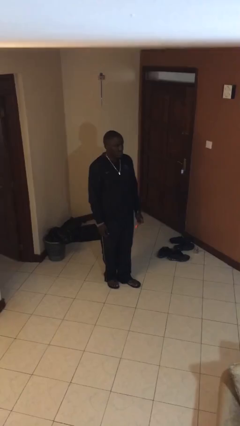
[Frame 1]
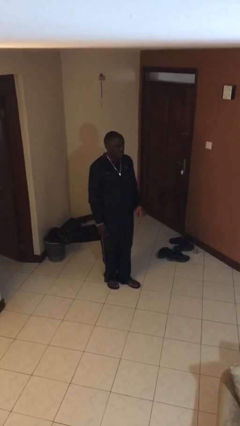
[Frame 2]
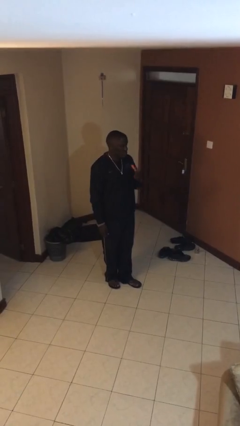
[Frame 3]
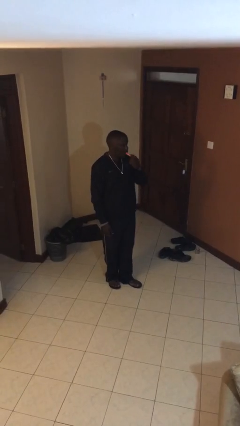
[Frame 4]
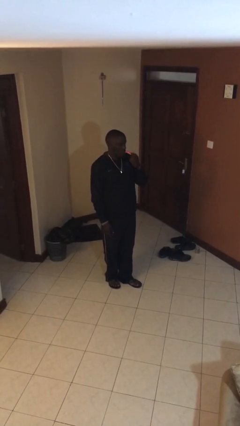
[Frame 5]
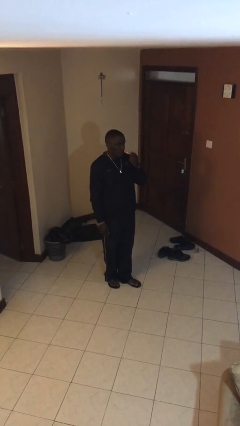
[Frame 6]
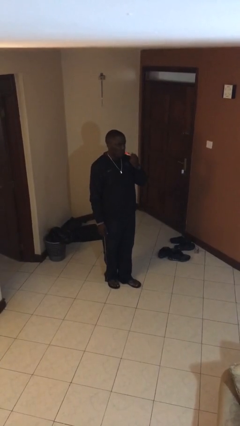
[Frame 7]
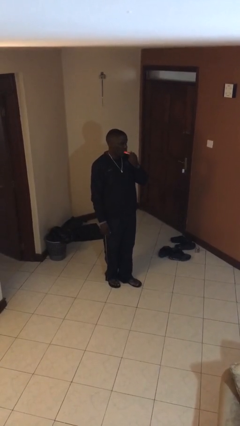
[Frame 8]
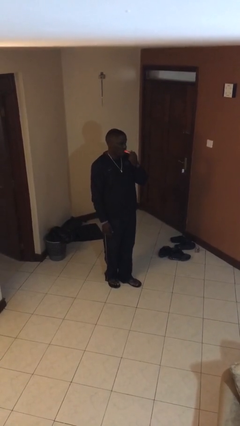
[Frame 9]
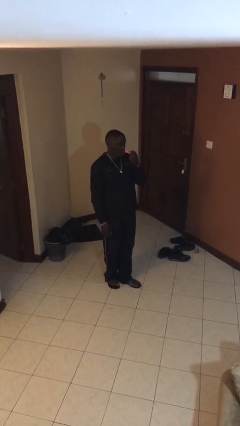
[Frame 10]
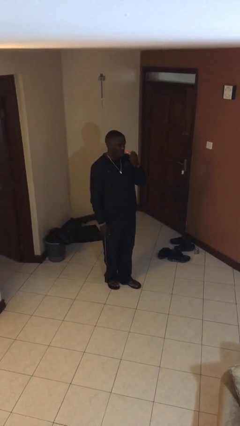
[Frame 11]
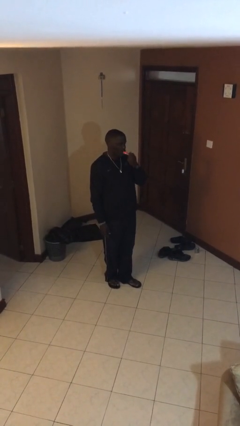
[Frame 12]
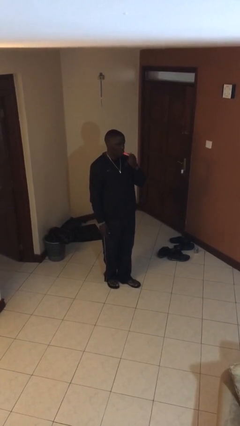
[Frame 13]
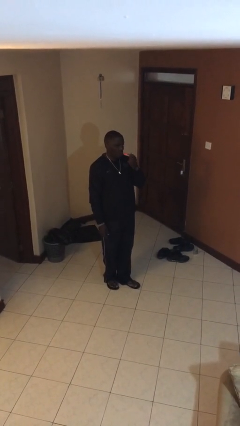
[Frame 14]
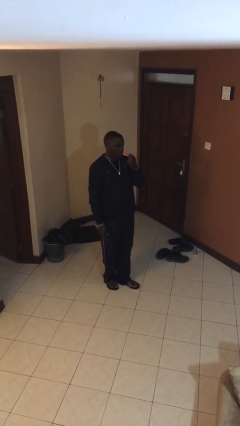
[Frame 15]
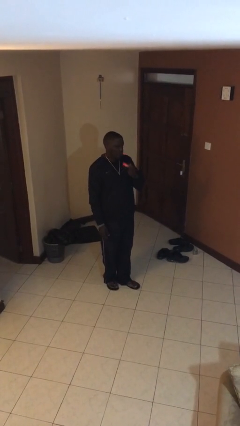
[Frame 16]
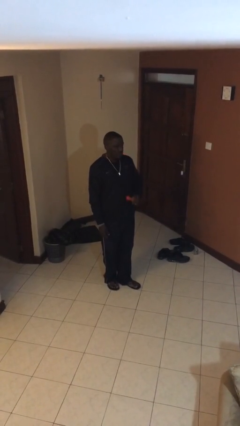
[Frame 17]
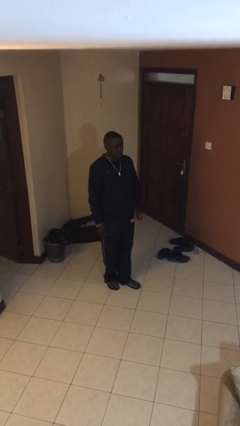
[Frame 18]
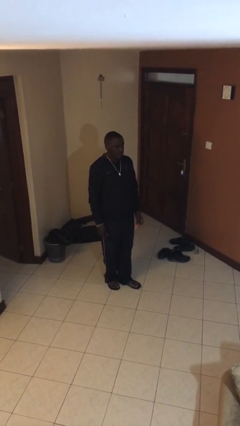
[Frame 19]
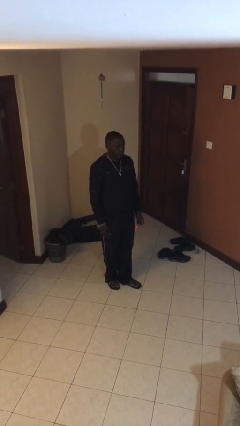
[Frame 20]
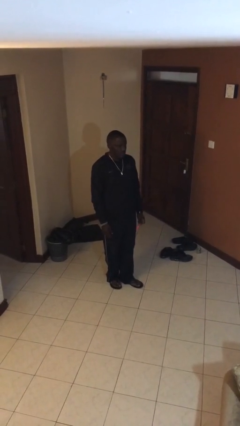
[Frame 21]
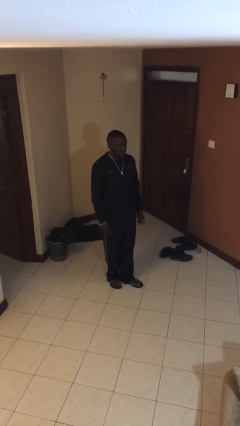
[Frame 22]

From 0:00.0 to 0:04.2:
person applies lip makeup

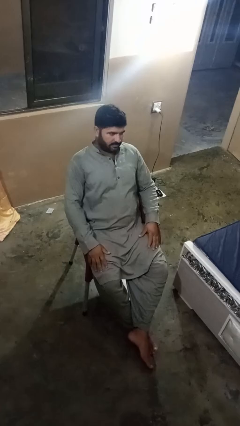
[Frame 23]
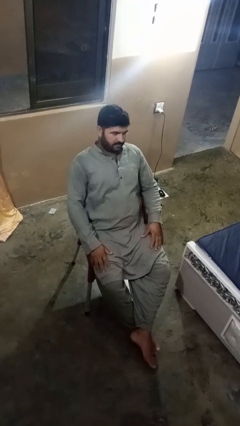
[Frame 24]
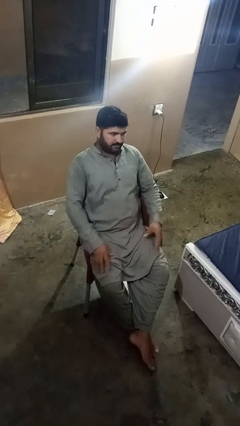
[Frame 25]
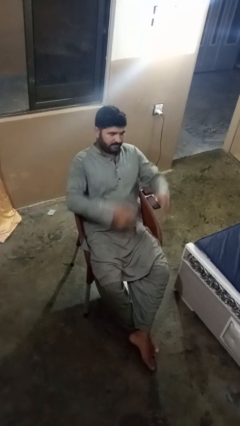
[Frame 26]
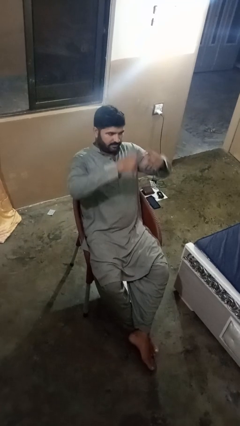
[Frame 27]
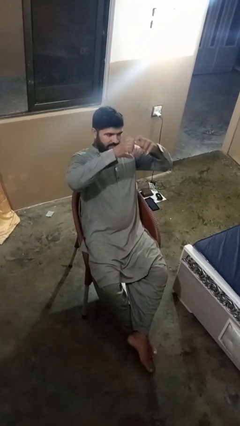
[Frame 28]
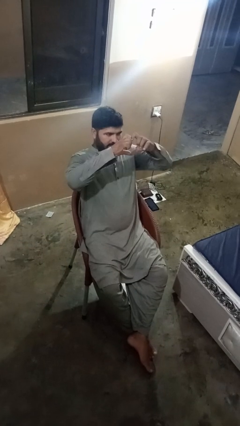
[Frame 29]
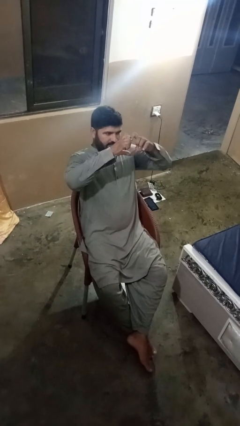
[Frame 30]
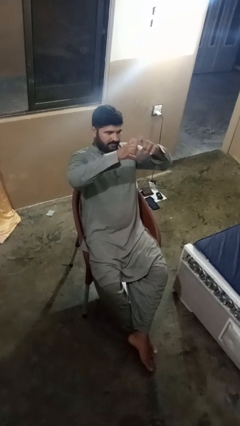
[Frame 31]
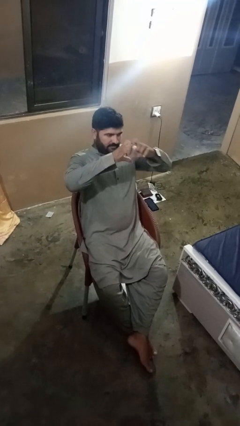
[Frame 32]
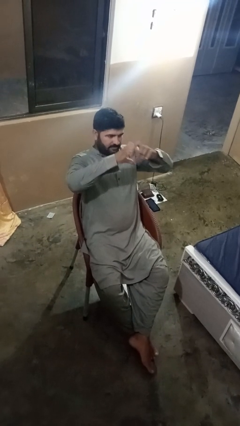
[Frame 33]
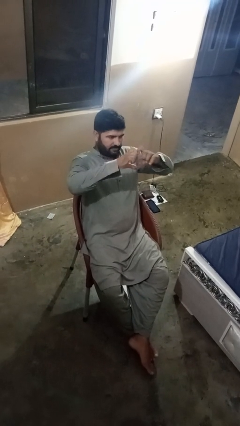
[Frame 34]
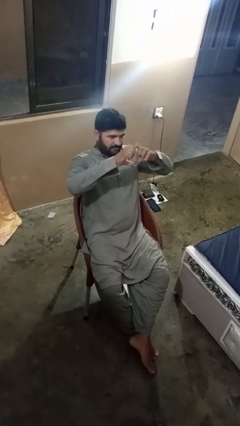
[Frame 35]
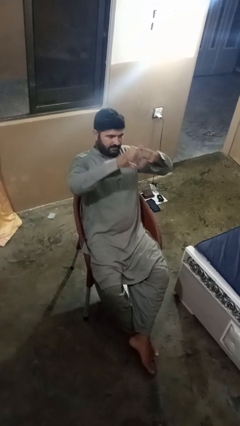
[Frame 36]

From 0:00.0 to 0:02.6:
person gestures heart

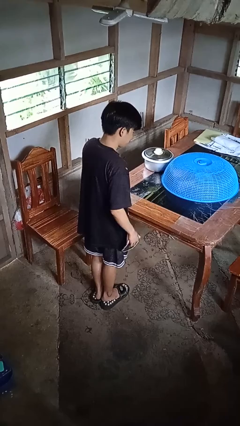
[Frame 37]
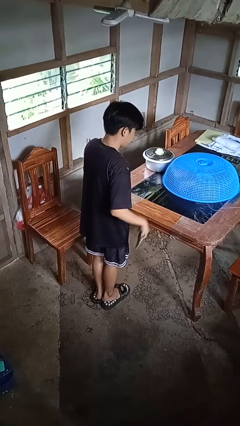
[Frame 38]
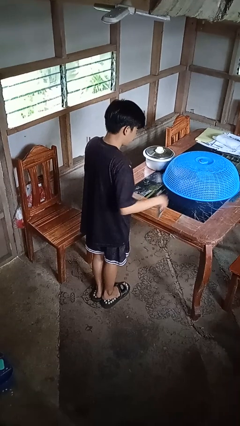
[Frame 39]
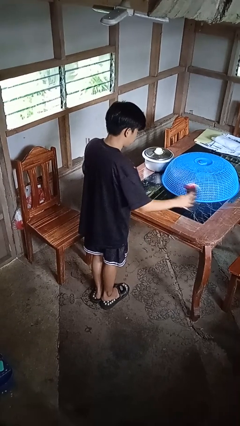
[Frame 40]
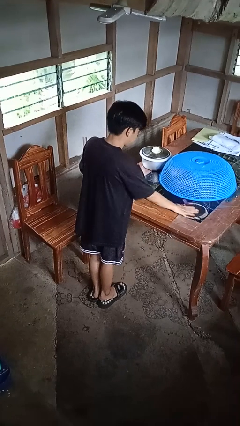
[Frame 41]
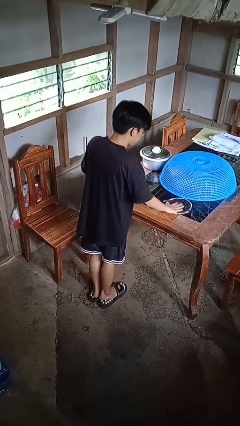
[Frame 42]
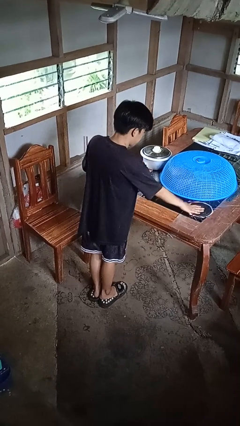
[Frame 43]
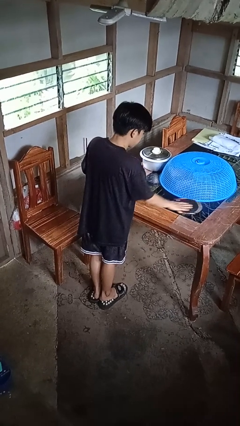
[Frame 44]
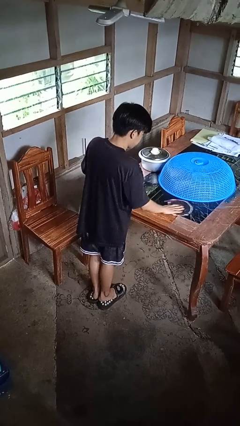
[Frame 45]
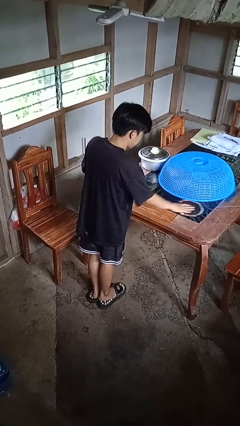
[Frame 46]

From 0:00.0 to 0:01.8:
person cleans table with rag

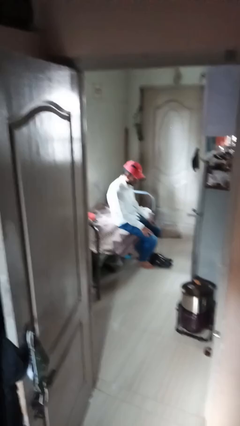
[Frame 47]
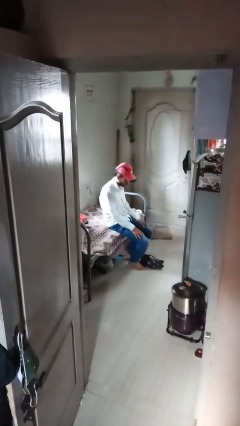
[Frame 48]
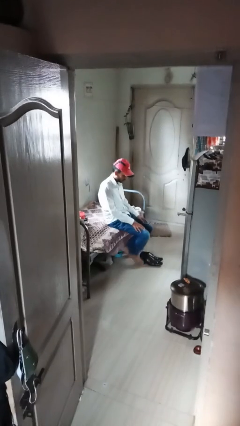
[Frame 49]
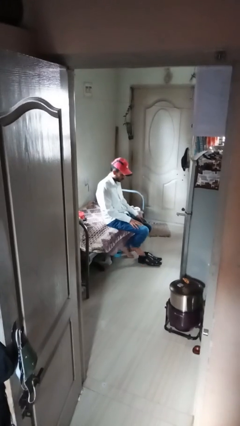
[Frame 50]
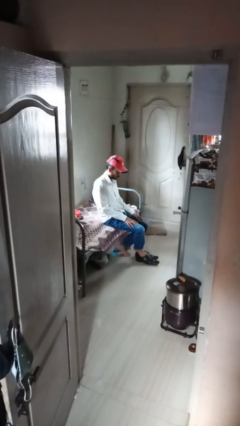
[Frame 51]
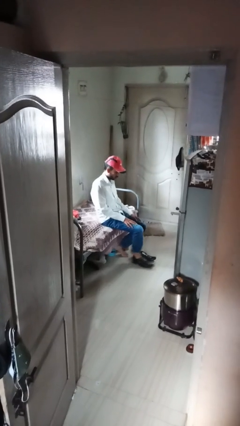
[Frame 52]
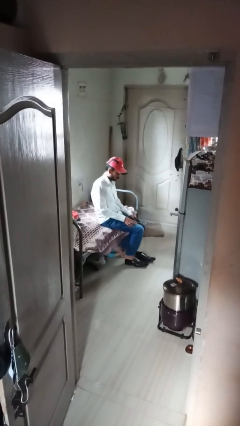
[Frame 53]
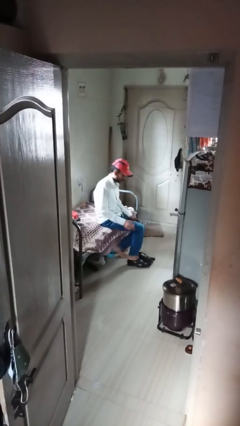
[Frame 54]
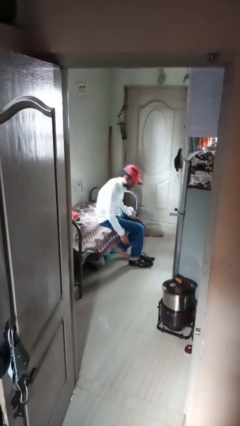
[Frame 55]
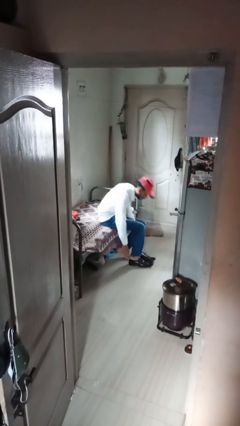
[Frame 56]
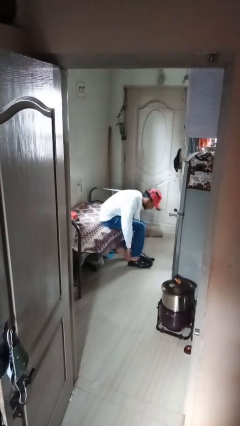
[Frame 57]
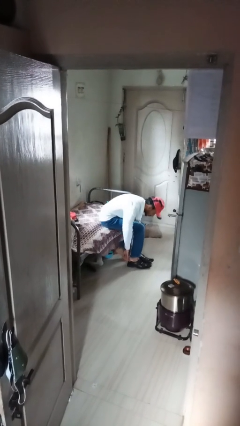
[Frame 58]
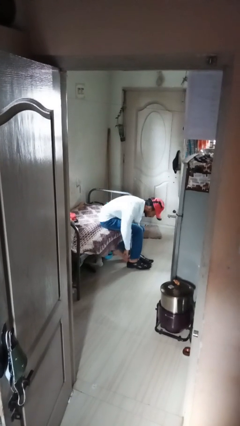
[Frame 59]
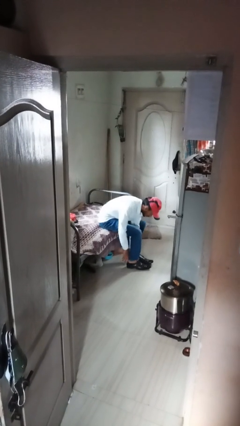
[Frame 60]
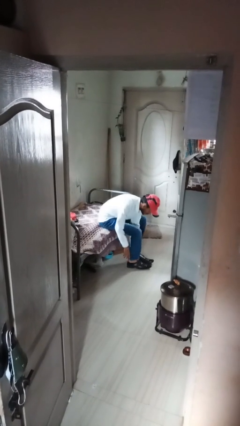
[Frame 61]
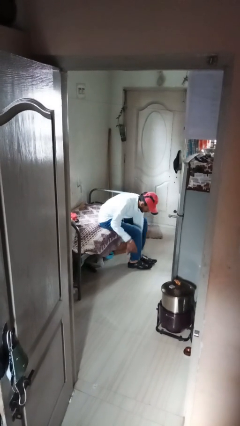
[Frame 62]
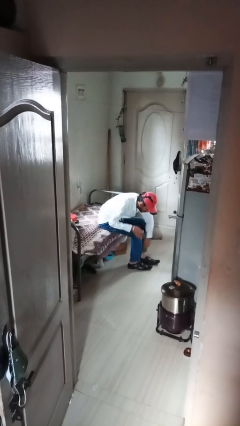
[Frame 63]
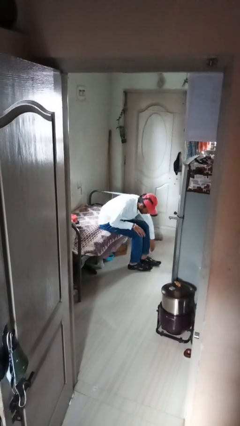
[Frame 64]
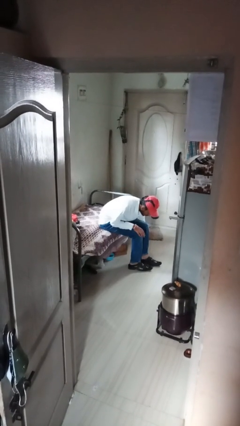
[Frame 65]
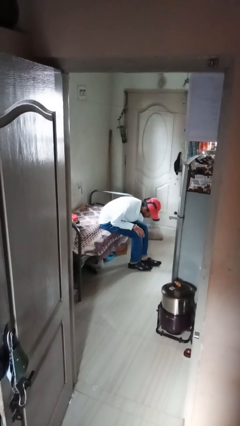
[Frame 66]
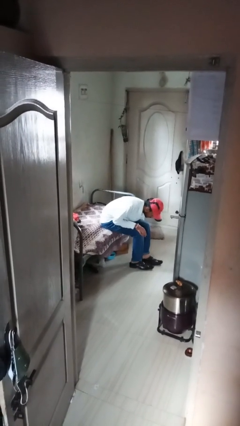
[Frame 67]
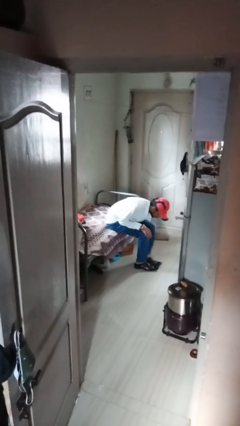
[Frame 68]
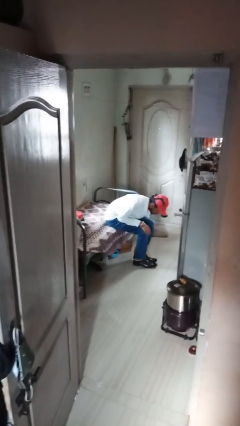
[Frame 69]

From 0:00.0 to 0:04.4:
person puts on shoes

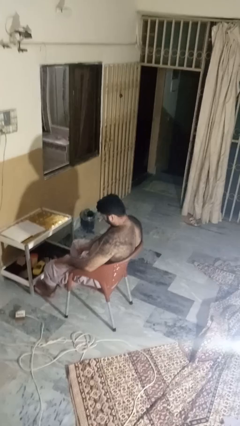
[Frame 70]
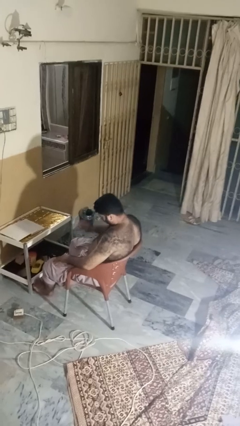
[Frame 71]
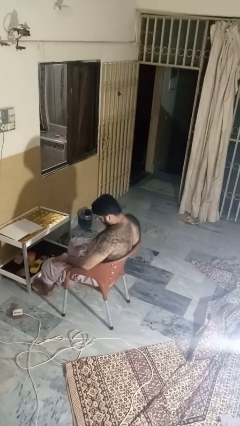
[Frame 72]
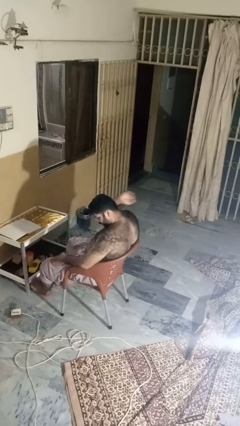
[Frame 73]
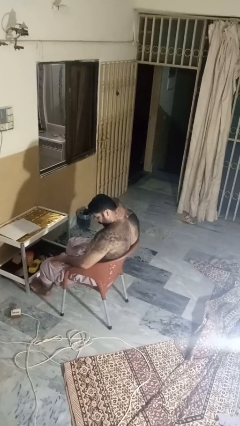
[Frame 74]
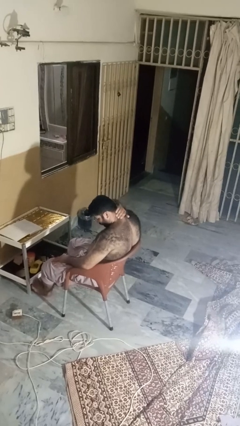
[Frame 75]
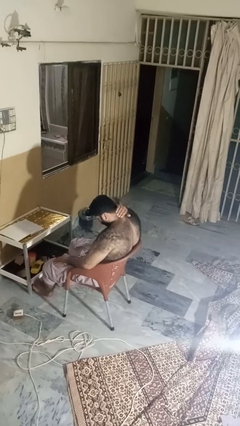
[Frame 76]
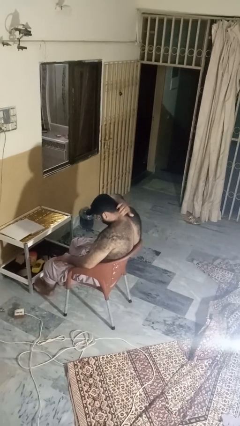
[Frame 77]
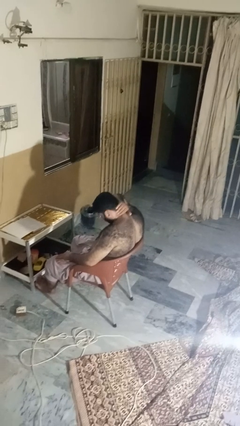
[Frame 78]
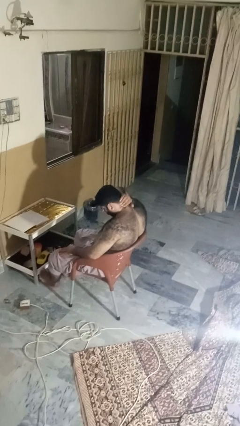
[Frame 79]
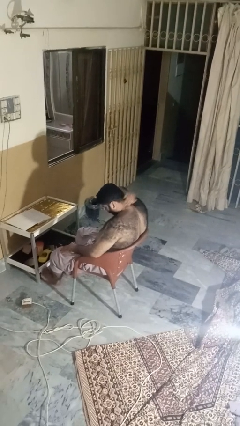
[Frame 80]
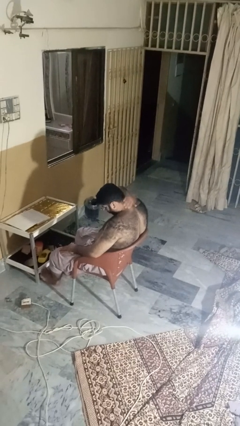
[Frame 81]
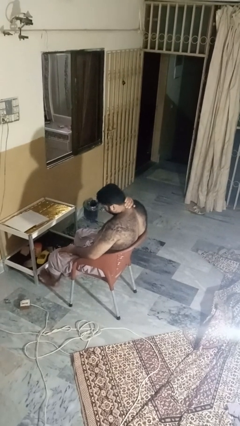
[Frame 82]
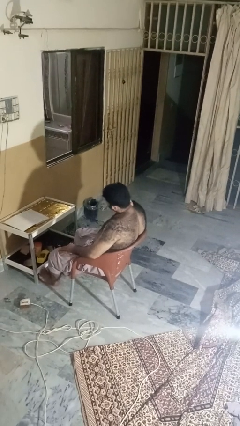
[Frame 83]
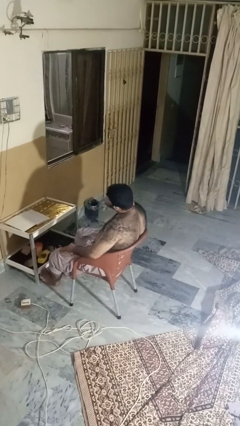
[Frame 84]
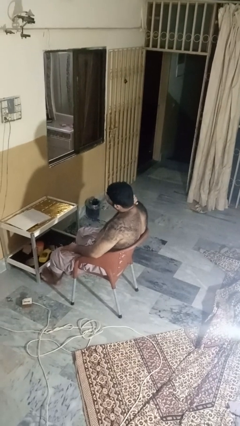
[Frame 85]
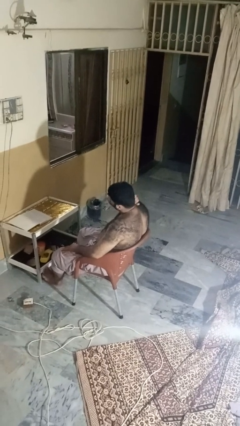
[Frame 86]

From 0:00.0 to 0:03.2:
person rubs neck

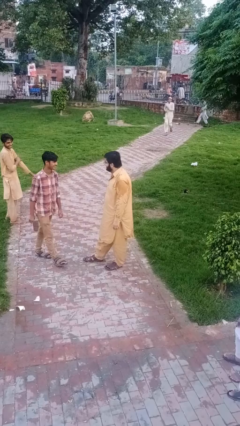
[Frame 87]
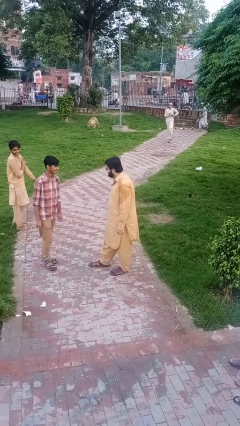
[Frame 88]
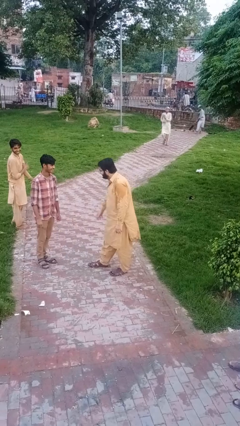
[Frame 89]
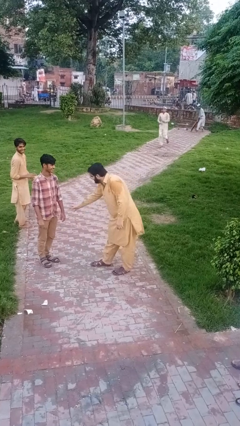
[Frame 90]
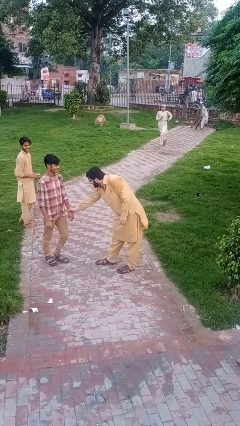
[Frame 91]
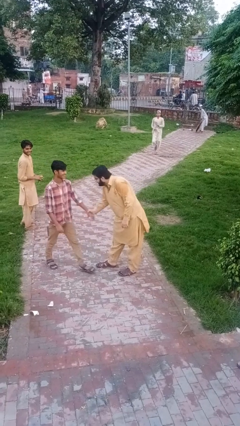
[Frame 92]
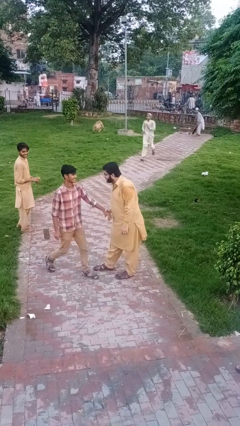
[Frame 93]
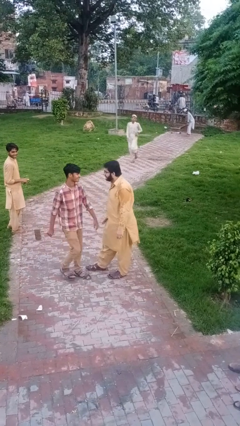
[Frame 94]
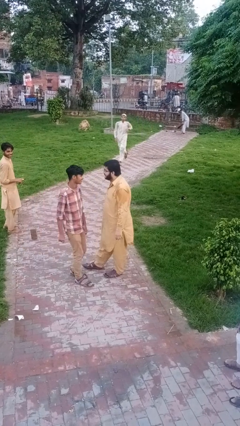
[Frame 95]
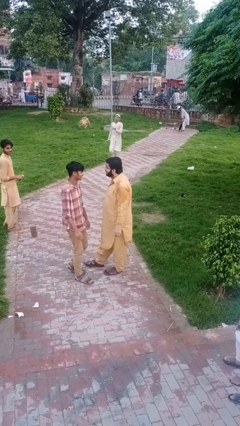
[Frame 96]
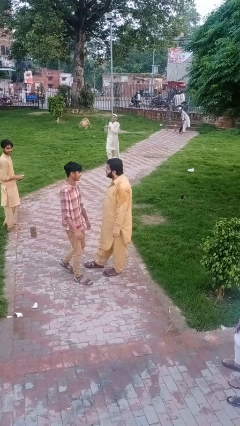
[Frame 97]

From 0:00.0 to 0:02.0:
person grabs person by forearm
